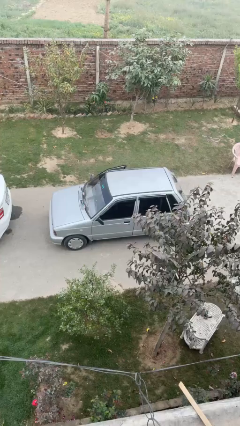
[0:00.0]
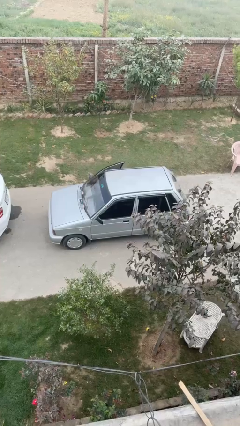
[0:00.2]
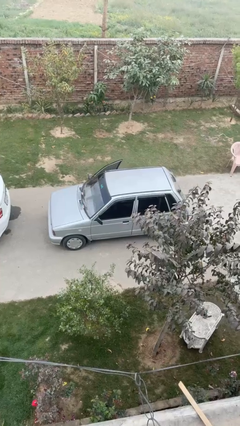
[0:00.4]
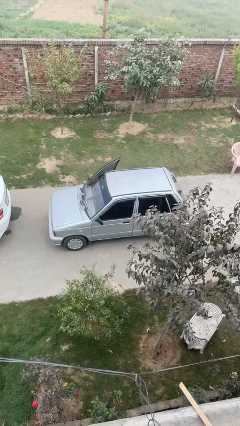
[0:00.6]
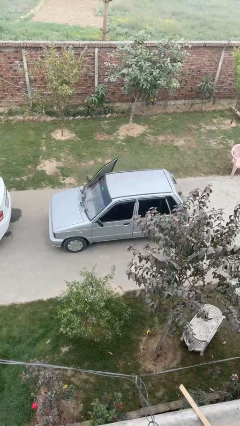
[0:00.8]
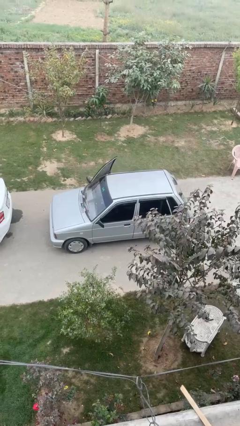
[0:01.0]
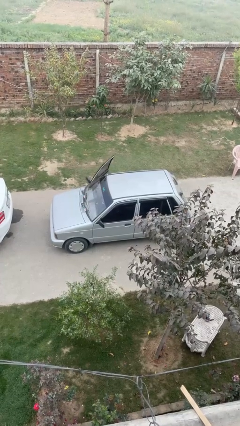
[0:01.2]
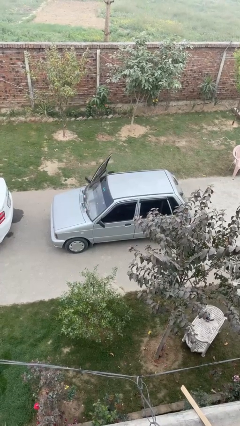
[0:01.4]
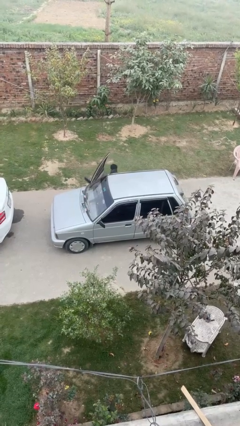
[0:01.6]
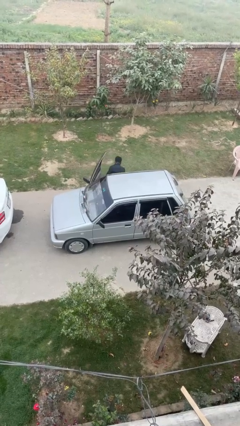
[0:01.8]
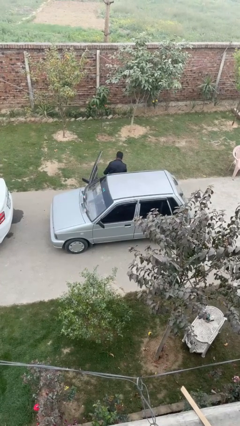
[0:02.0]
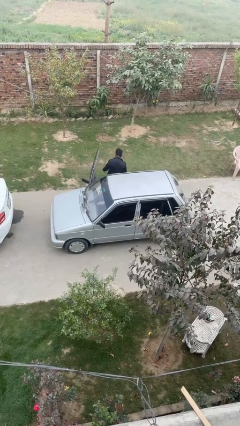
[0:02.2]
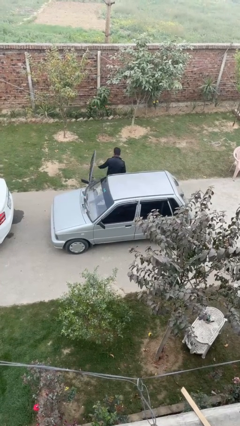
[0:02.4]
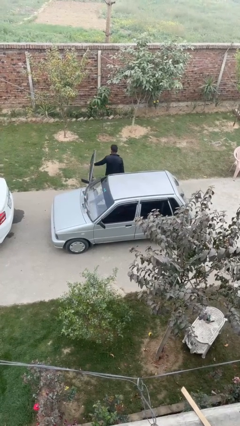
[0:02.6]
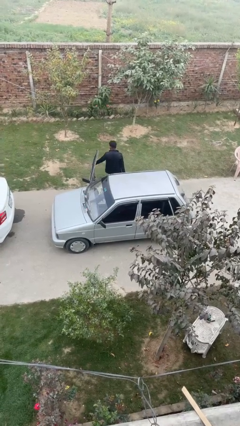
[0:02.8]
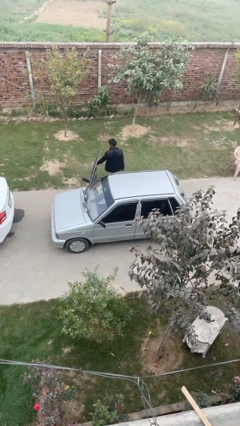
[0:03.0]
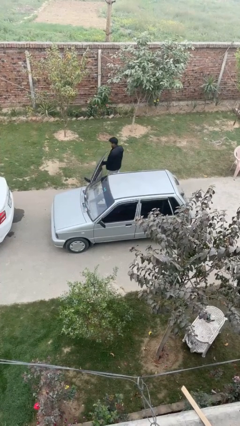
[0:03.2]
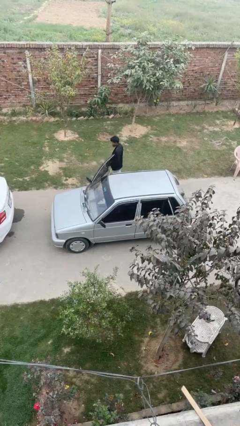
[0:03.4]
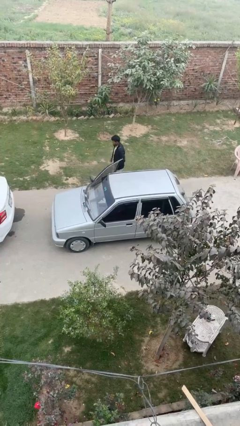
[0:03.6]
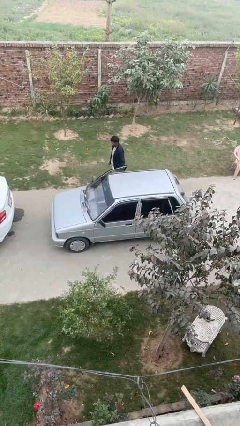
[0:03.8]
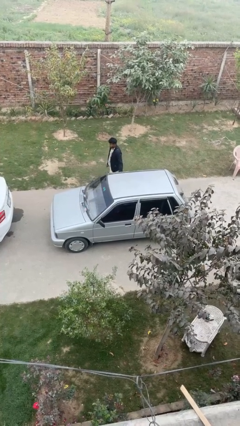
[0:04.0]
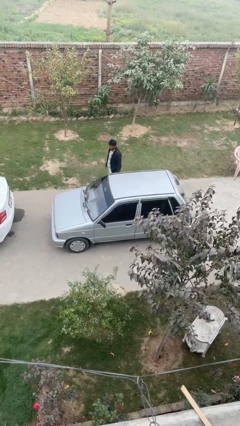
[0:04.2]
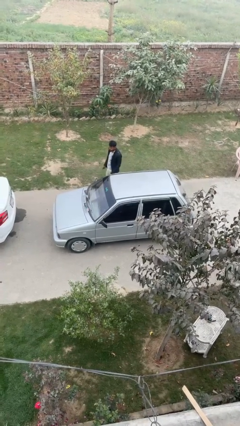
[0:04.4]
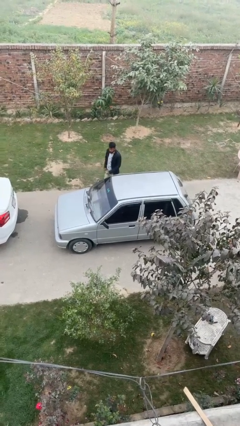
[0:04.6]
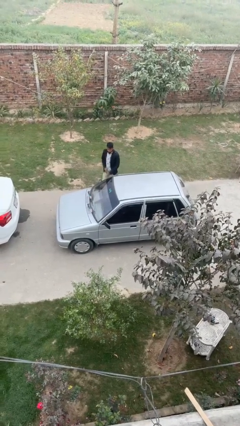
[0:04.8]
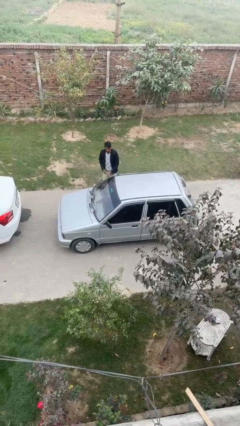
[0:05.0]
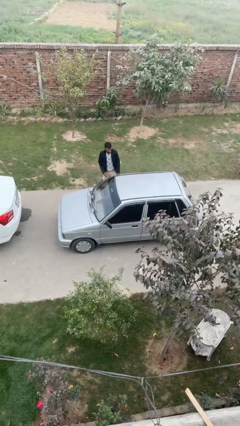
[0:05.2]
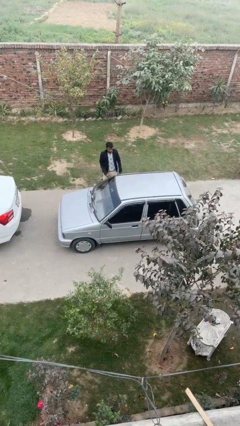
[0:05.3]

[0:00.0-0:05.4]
car drops off person

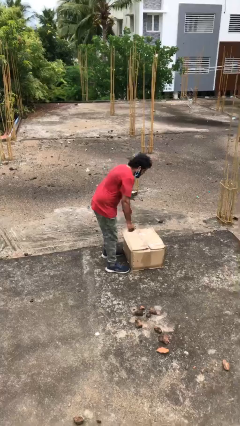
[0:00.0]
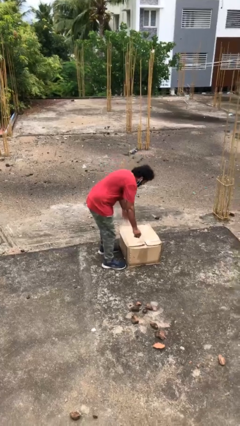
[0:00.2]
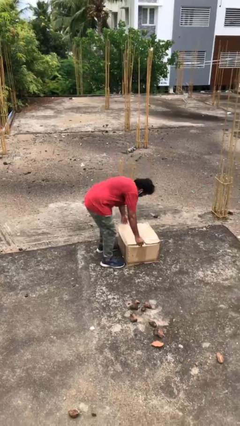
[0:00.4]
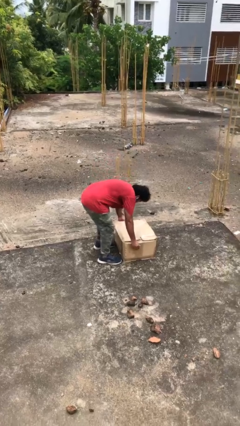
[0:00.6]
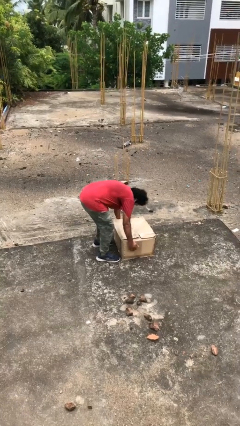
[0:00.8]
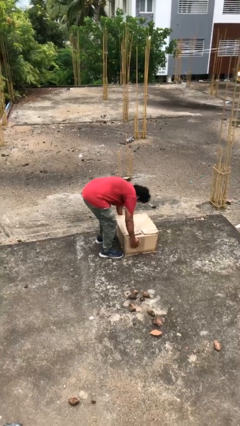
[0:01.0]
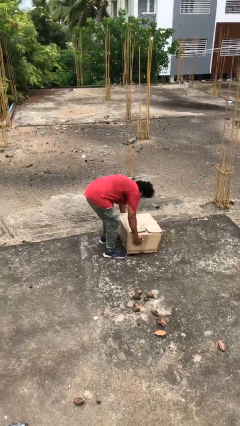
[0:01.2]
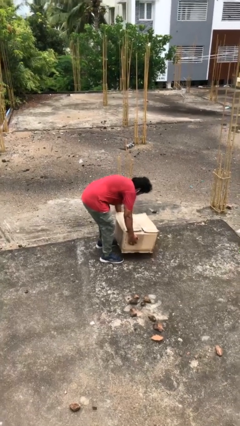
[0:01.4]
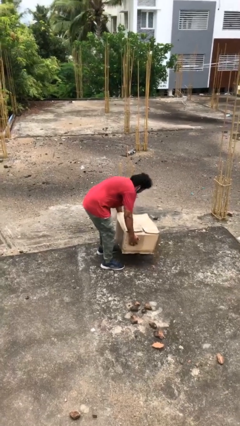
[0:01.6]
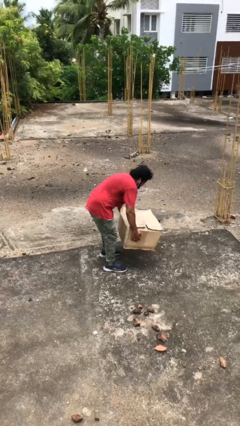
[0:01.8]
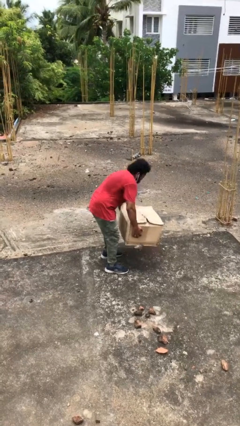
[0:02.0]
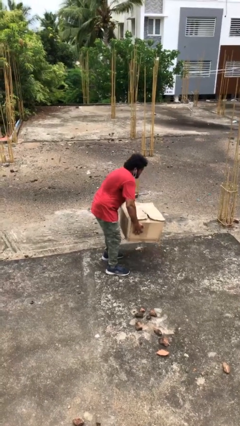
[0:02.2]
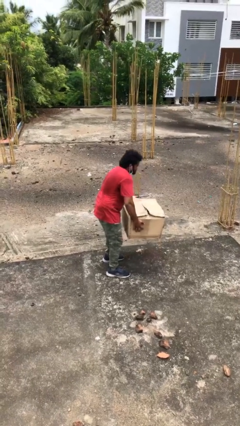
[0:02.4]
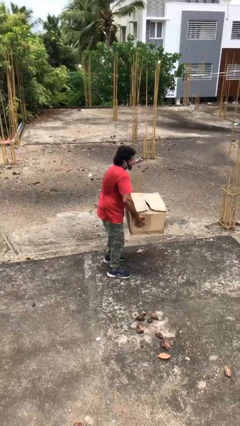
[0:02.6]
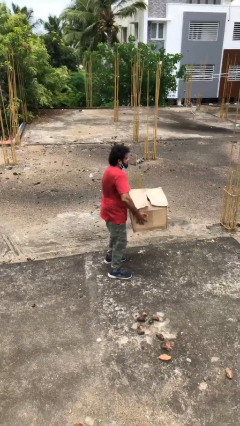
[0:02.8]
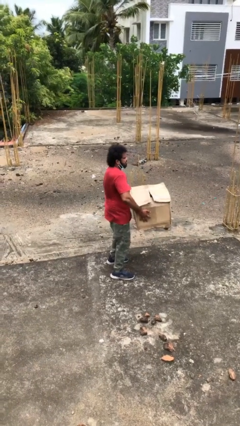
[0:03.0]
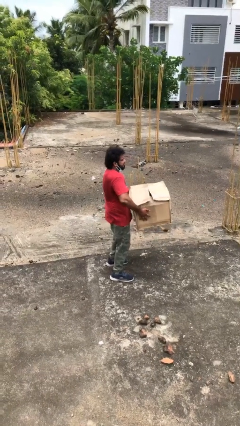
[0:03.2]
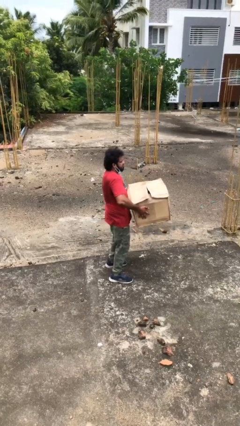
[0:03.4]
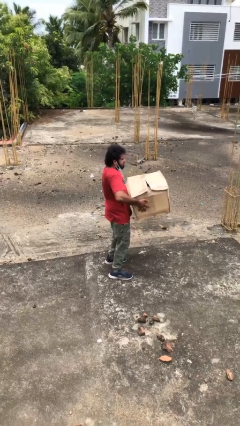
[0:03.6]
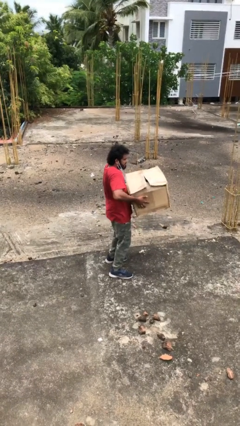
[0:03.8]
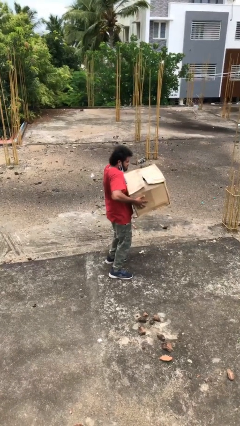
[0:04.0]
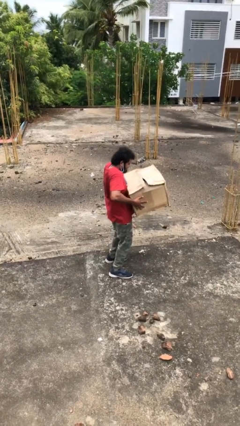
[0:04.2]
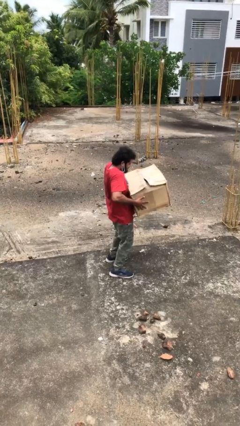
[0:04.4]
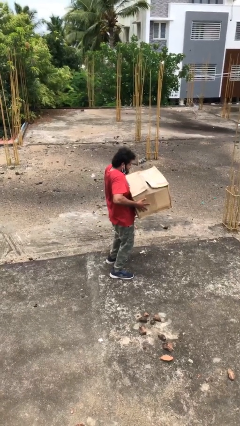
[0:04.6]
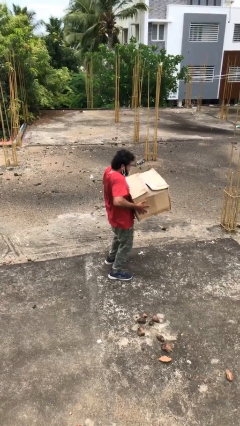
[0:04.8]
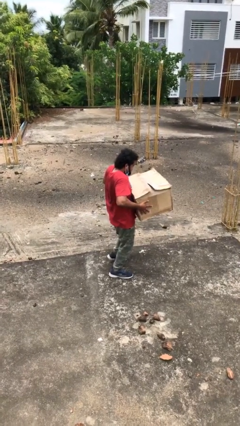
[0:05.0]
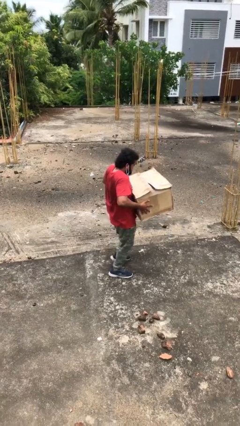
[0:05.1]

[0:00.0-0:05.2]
person picks up object from floor

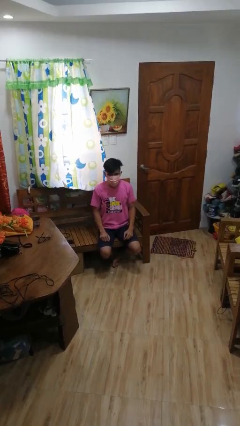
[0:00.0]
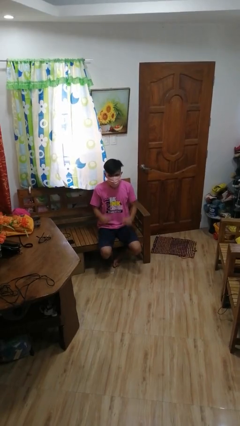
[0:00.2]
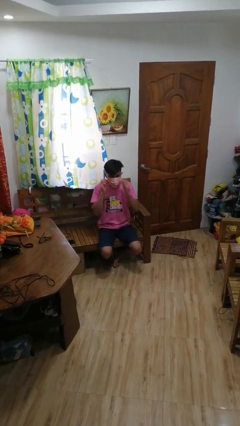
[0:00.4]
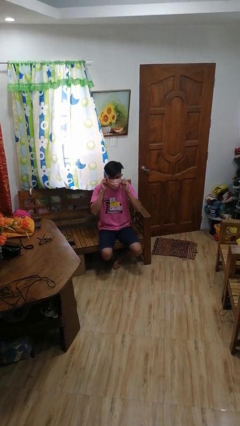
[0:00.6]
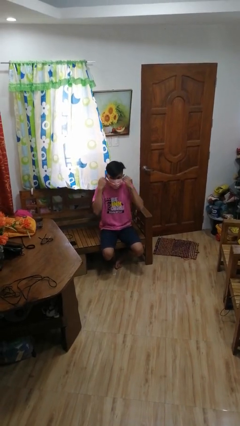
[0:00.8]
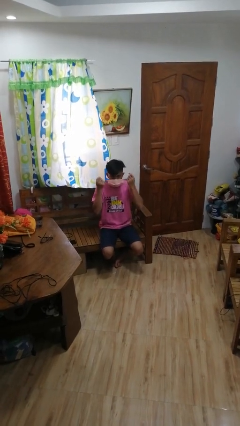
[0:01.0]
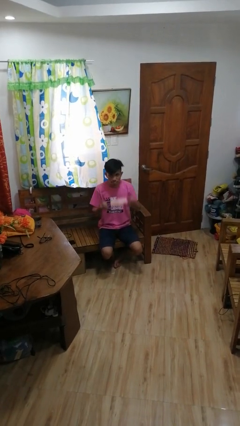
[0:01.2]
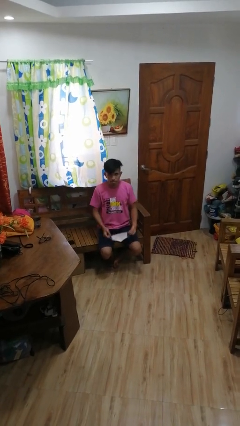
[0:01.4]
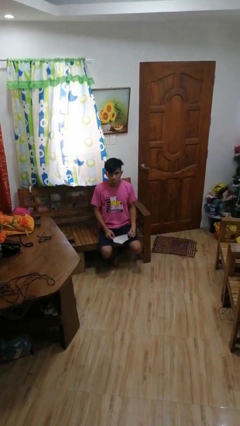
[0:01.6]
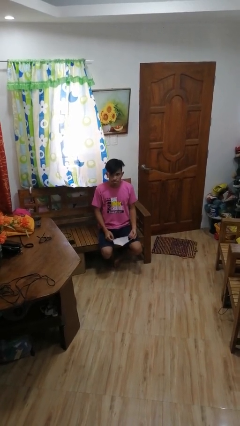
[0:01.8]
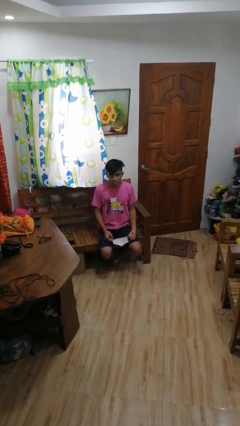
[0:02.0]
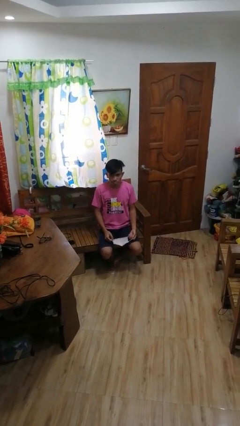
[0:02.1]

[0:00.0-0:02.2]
person takes off facemask

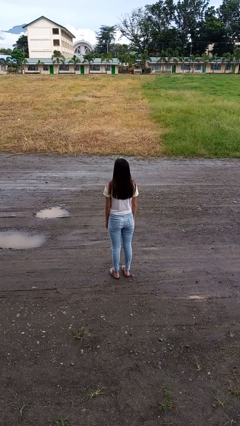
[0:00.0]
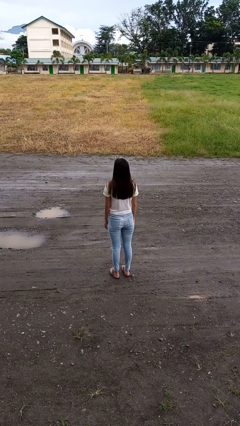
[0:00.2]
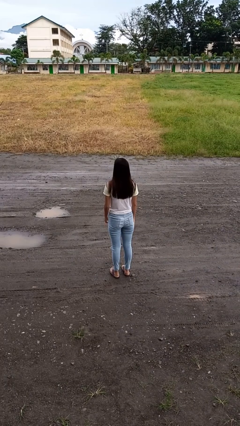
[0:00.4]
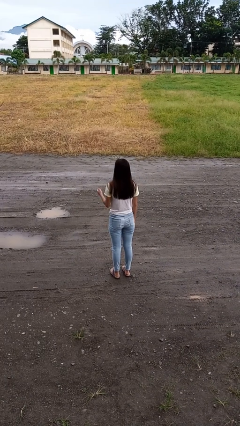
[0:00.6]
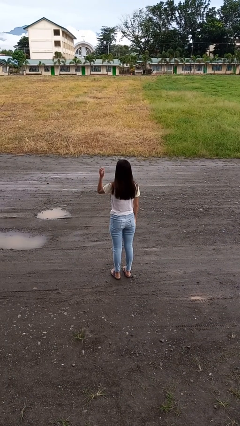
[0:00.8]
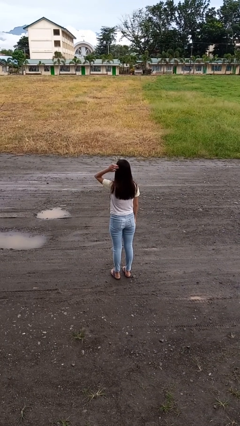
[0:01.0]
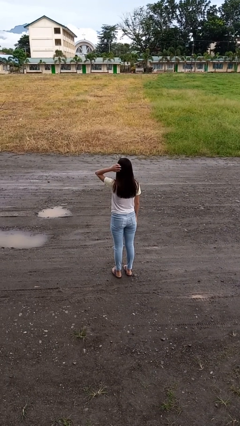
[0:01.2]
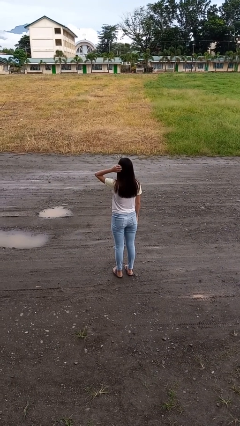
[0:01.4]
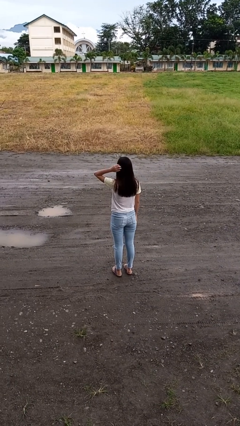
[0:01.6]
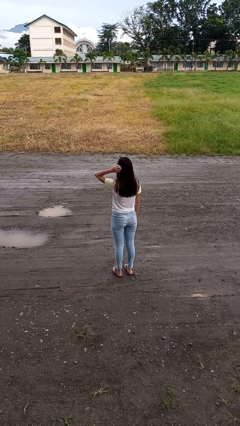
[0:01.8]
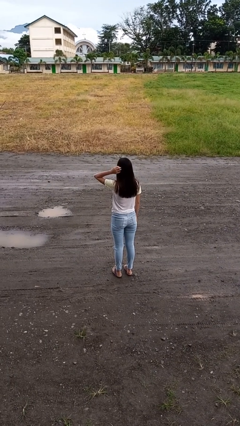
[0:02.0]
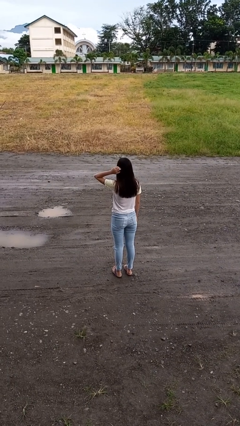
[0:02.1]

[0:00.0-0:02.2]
person scratches face

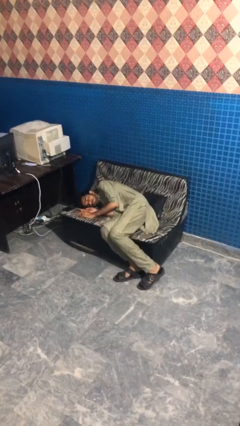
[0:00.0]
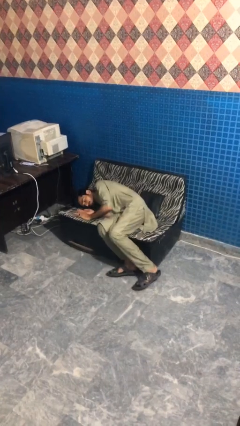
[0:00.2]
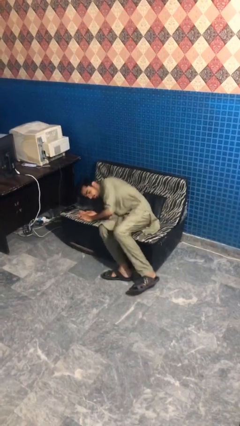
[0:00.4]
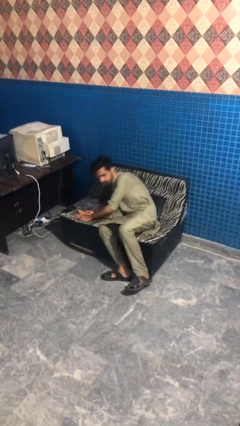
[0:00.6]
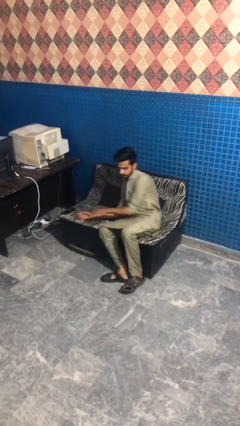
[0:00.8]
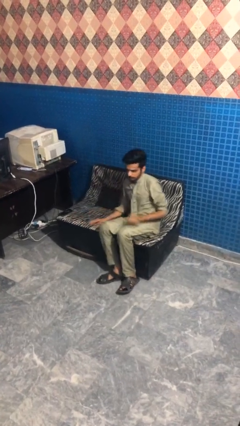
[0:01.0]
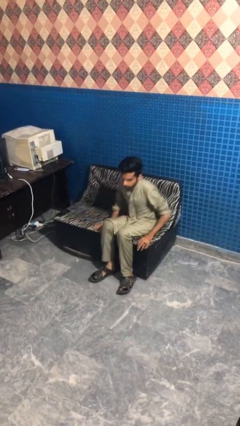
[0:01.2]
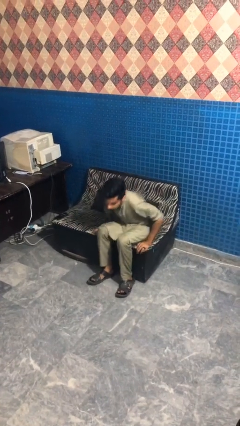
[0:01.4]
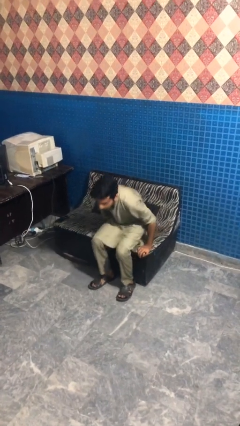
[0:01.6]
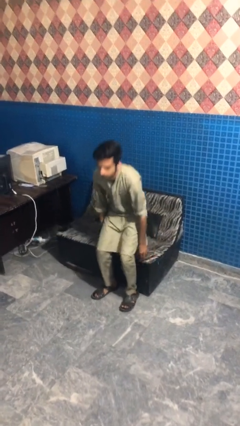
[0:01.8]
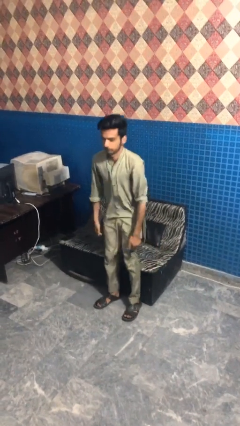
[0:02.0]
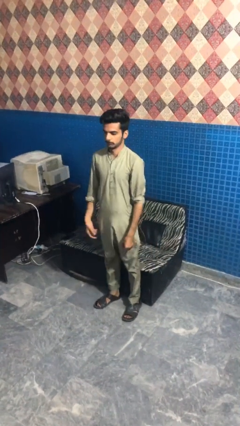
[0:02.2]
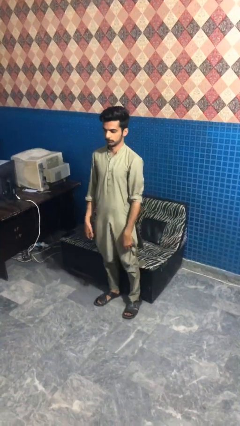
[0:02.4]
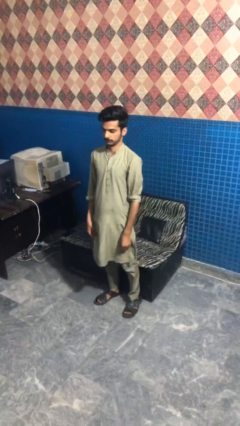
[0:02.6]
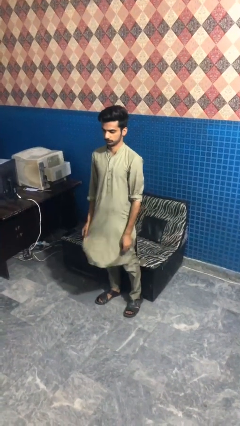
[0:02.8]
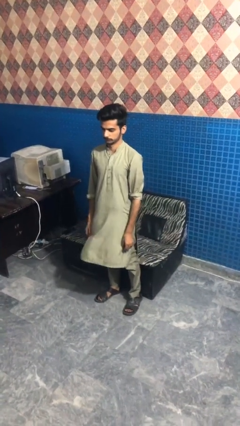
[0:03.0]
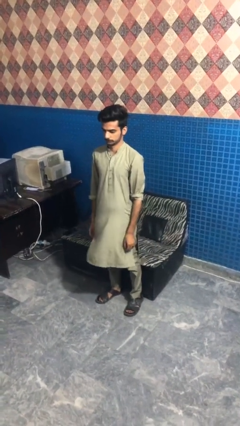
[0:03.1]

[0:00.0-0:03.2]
person stands up
